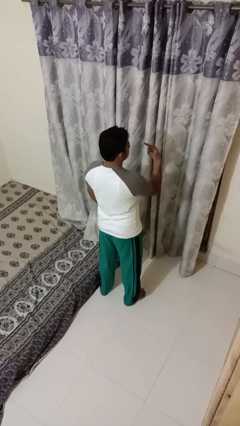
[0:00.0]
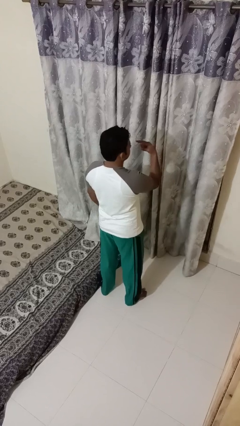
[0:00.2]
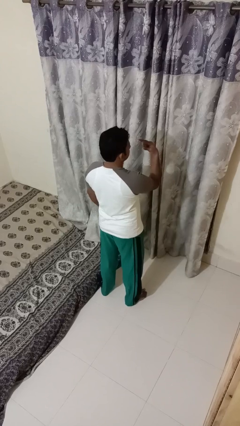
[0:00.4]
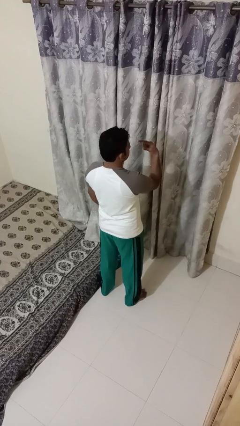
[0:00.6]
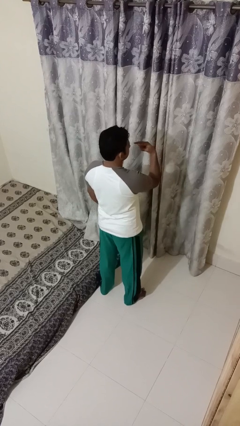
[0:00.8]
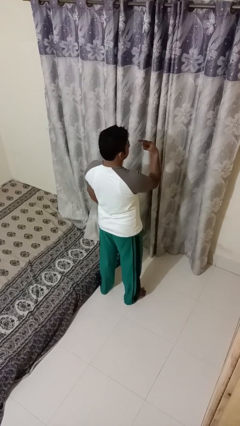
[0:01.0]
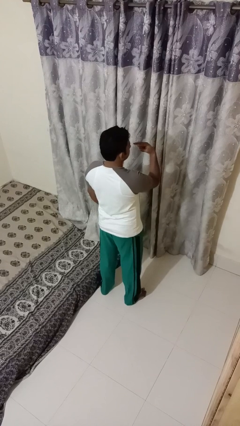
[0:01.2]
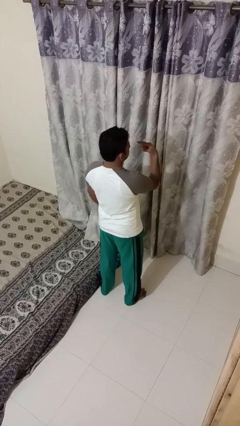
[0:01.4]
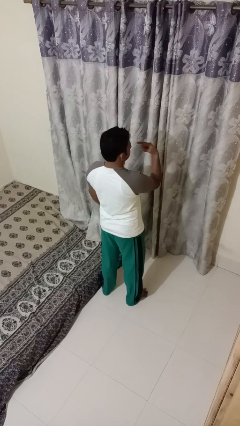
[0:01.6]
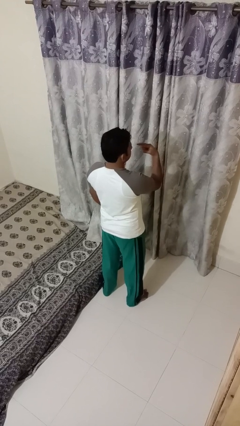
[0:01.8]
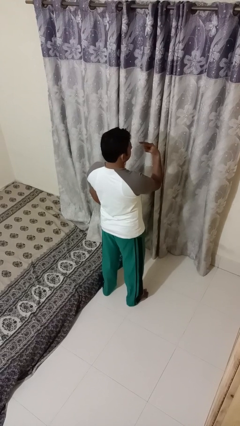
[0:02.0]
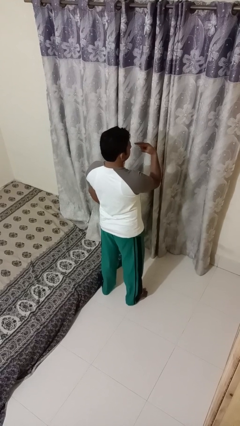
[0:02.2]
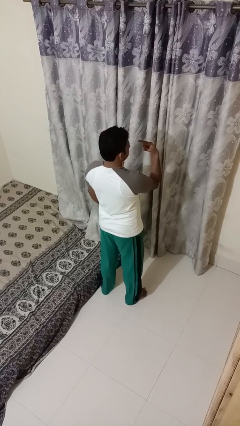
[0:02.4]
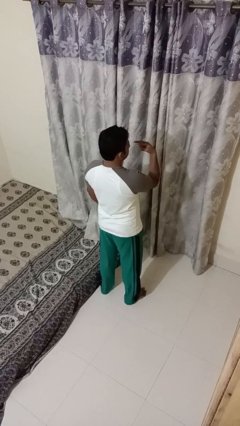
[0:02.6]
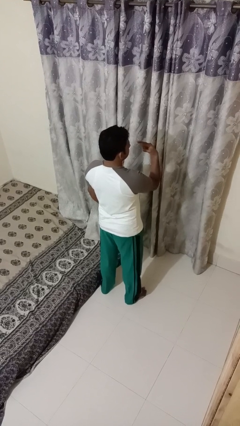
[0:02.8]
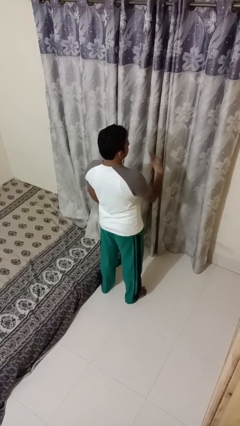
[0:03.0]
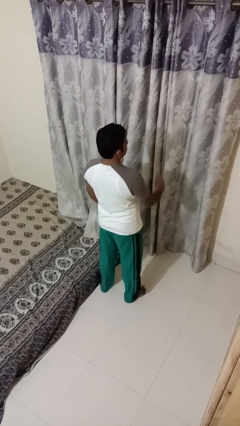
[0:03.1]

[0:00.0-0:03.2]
person gestures watch closely

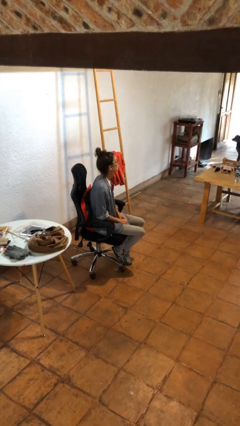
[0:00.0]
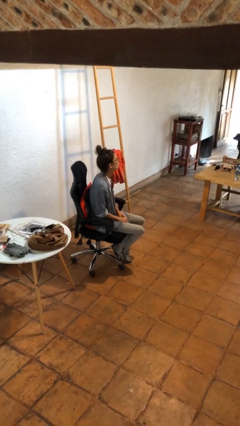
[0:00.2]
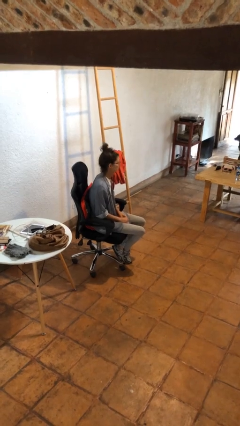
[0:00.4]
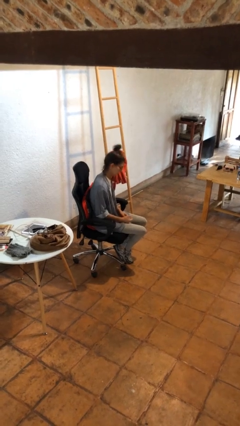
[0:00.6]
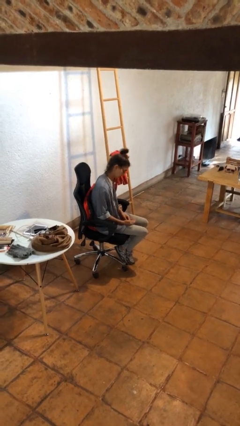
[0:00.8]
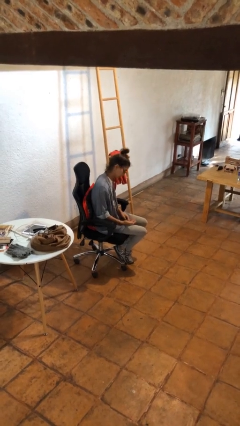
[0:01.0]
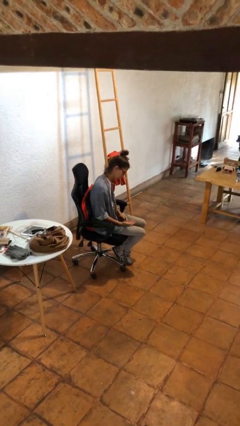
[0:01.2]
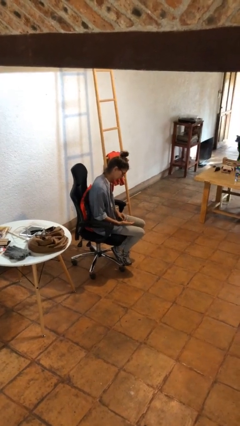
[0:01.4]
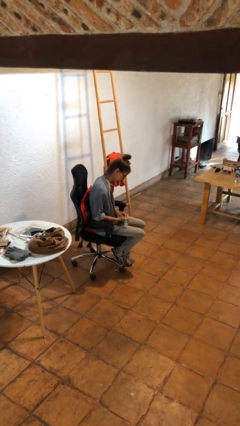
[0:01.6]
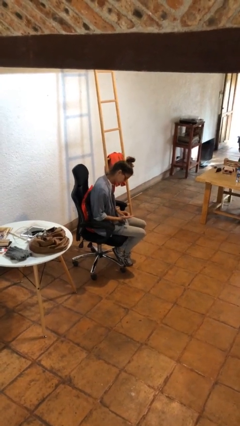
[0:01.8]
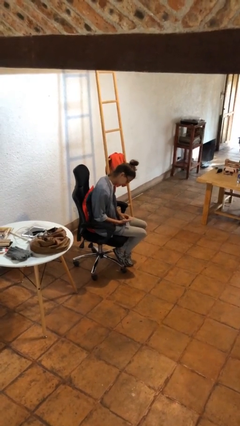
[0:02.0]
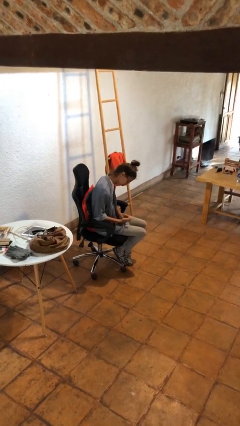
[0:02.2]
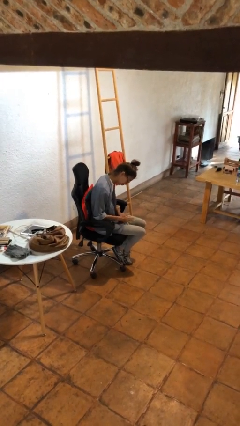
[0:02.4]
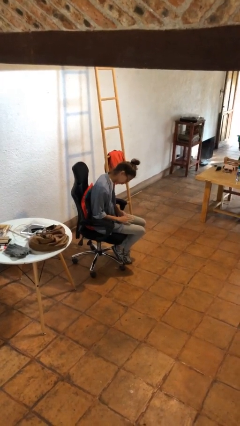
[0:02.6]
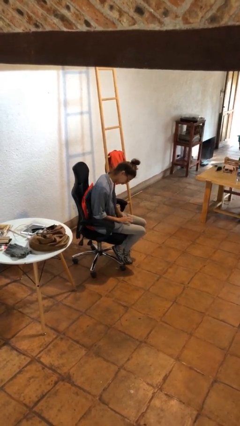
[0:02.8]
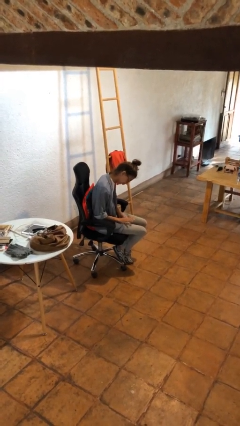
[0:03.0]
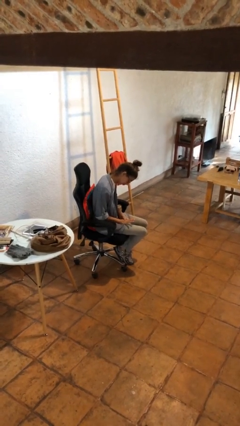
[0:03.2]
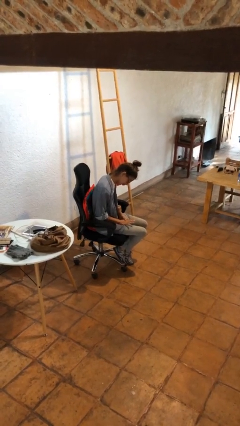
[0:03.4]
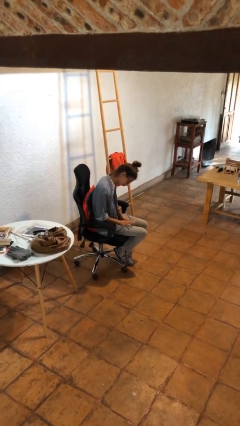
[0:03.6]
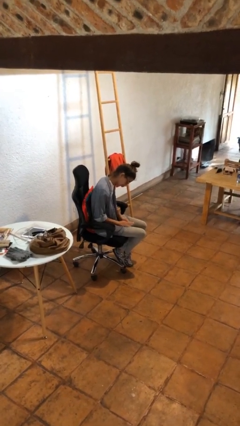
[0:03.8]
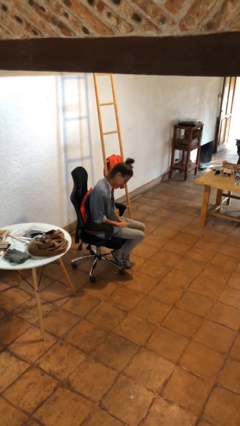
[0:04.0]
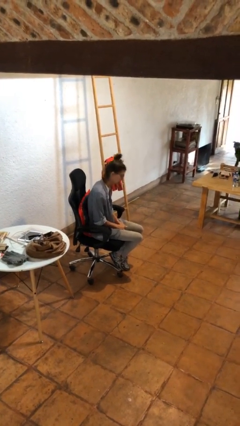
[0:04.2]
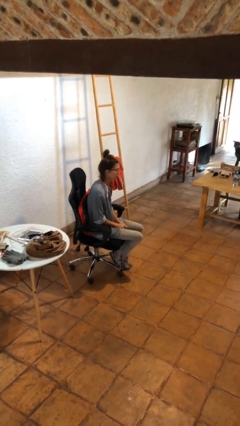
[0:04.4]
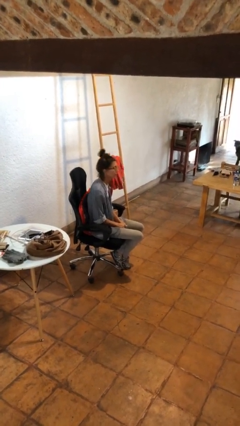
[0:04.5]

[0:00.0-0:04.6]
person looks at hands in lap

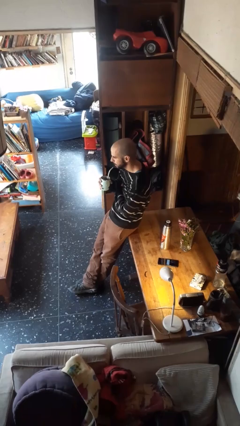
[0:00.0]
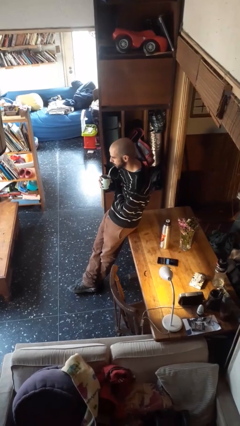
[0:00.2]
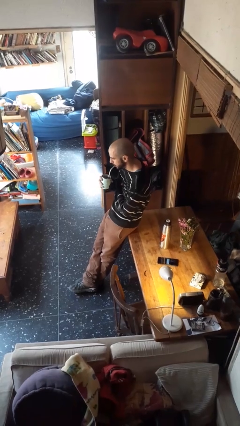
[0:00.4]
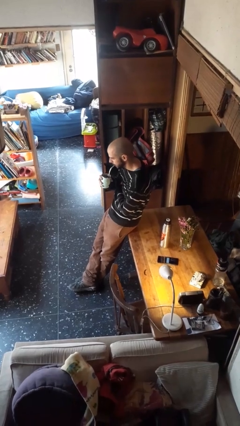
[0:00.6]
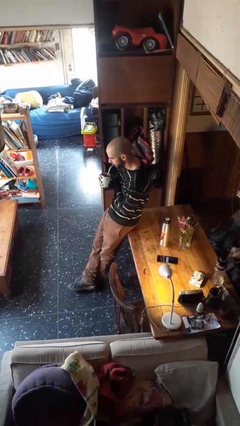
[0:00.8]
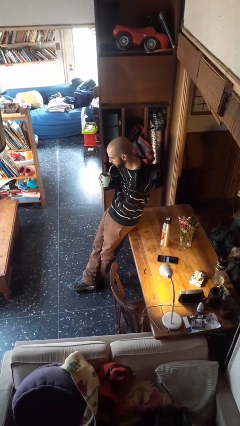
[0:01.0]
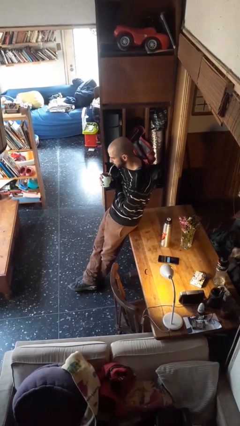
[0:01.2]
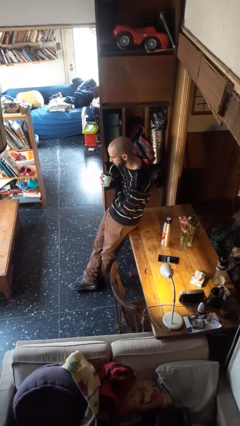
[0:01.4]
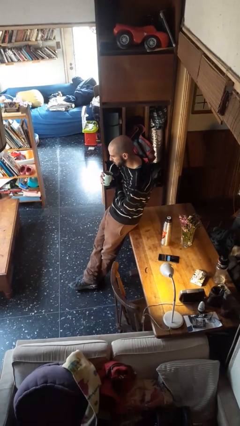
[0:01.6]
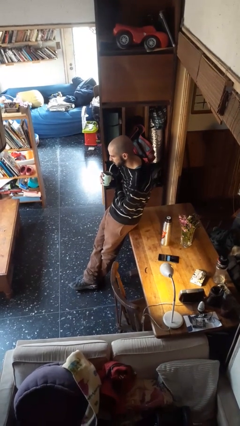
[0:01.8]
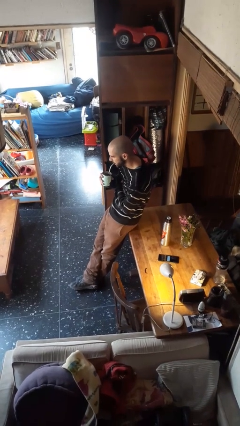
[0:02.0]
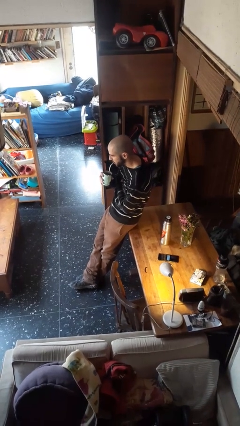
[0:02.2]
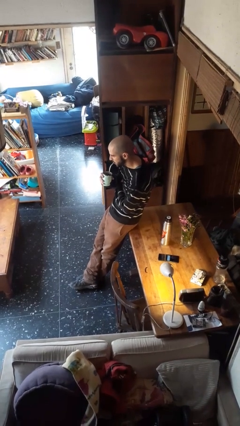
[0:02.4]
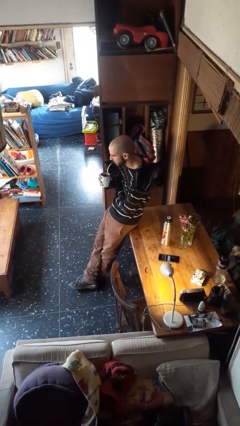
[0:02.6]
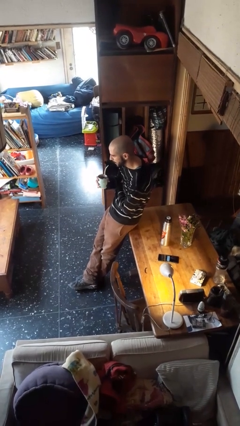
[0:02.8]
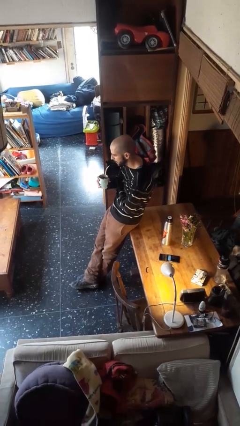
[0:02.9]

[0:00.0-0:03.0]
person drinks from straw

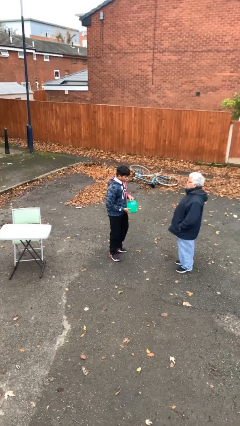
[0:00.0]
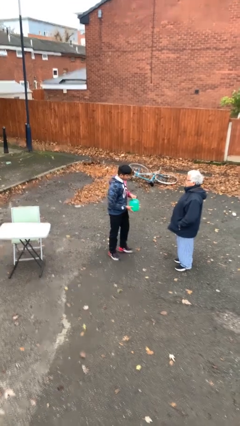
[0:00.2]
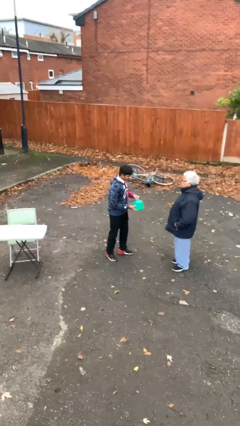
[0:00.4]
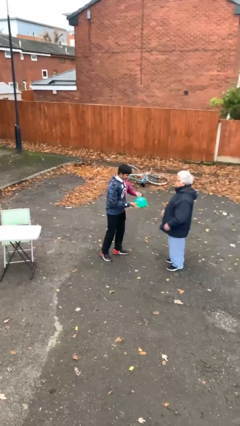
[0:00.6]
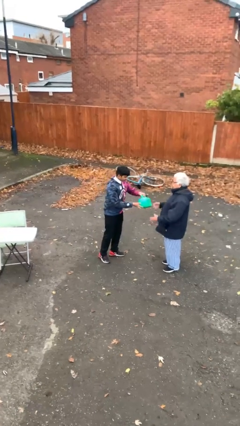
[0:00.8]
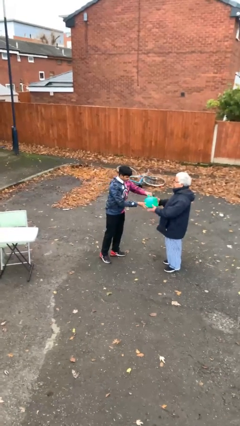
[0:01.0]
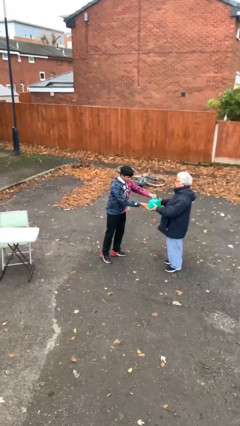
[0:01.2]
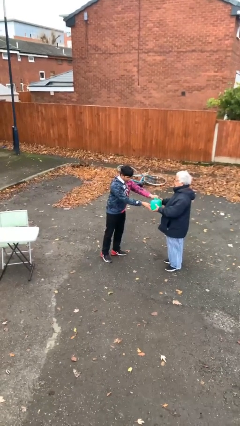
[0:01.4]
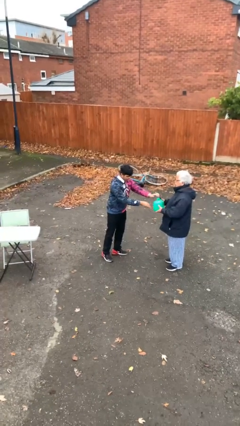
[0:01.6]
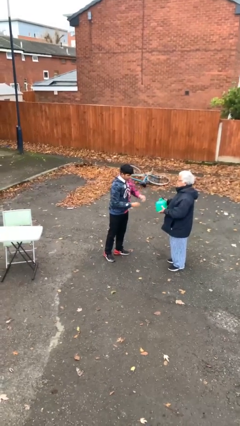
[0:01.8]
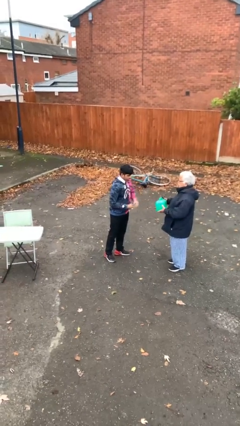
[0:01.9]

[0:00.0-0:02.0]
person transfers object to person

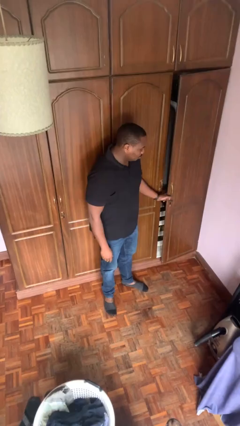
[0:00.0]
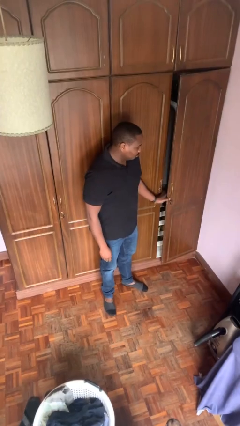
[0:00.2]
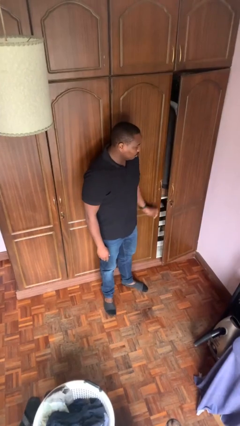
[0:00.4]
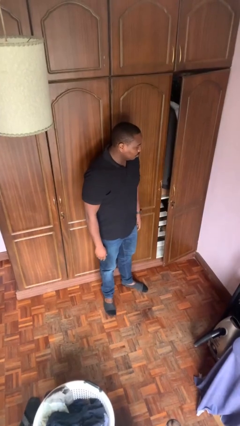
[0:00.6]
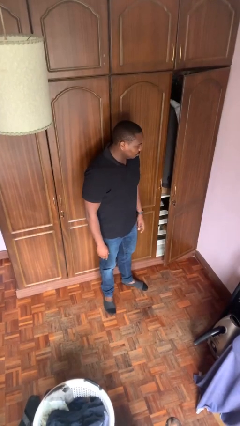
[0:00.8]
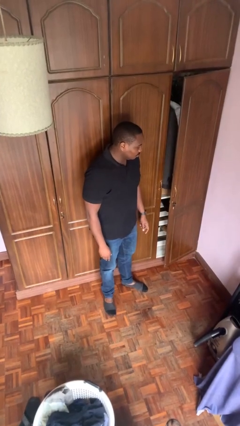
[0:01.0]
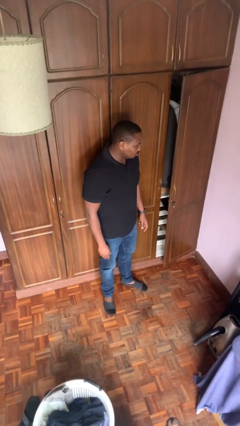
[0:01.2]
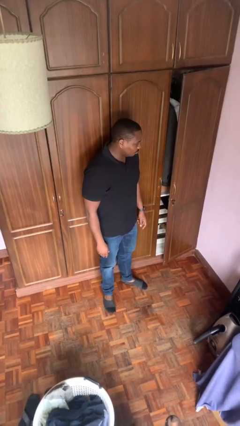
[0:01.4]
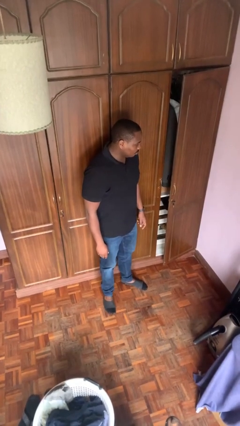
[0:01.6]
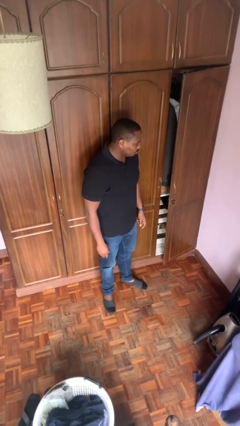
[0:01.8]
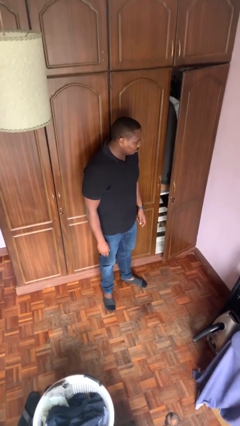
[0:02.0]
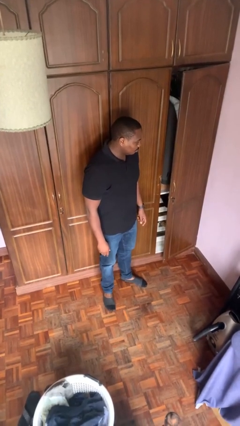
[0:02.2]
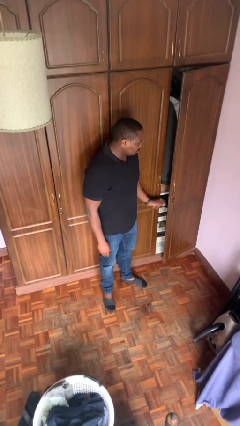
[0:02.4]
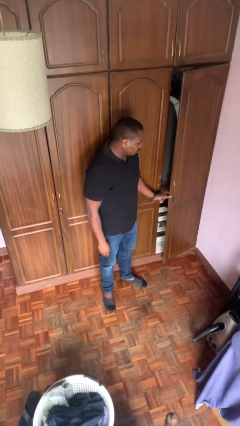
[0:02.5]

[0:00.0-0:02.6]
person closes closet door

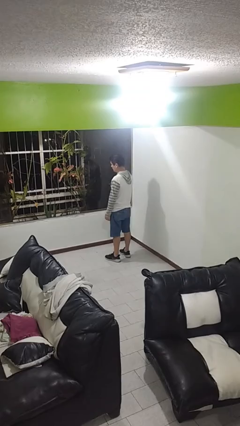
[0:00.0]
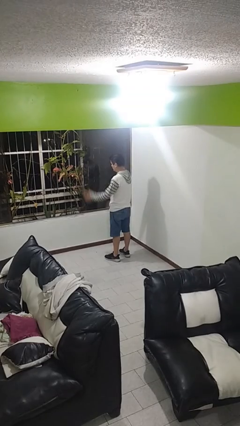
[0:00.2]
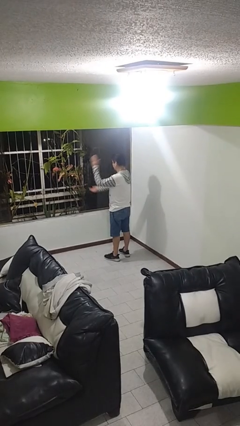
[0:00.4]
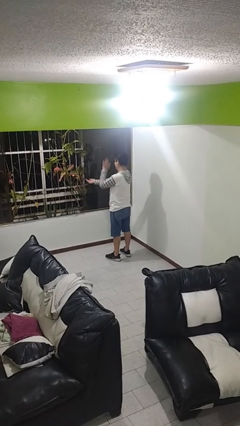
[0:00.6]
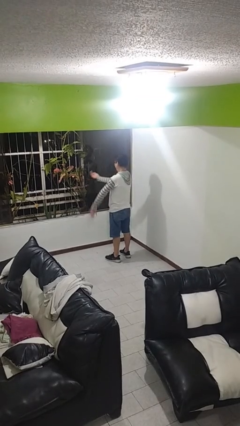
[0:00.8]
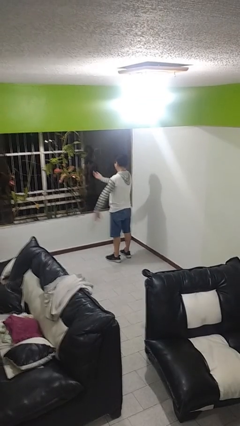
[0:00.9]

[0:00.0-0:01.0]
person swats bug

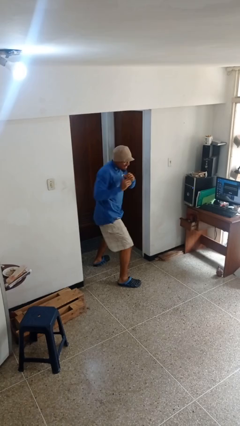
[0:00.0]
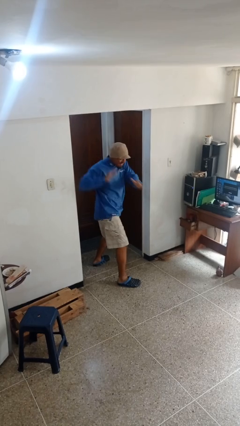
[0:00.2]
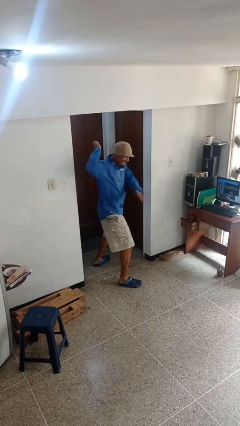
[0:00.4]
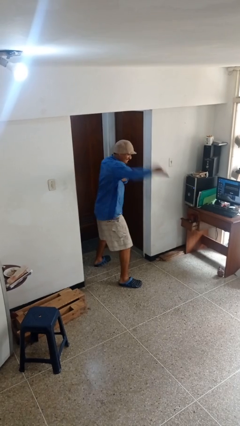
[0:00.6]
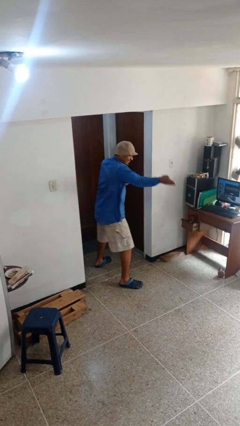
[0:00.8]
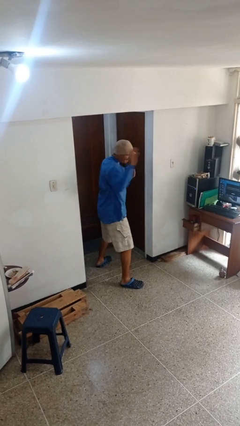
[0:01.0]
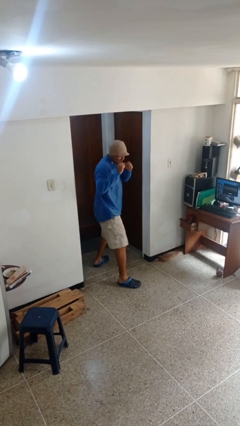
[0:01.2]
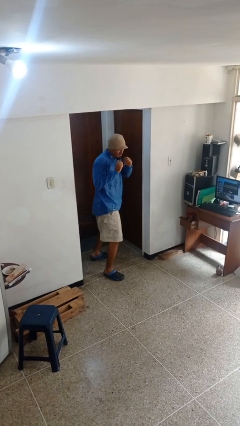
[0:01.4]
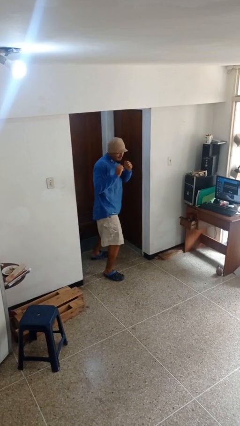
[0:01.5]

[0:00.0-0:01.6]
person karate chop
